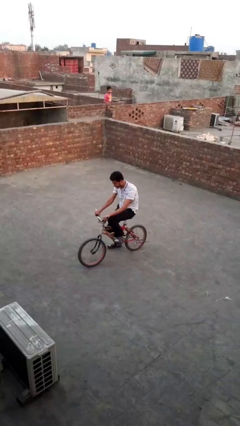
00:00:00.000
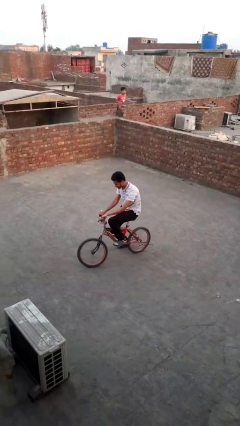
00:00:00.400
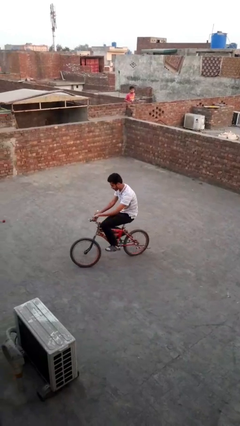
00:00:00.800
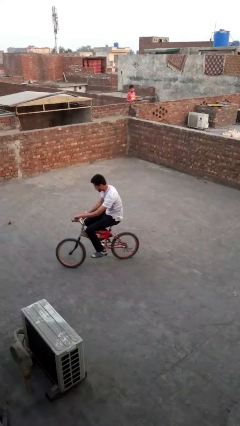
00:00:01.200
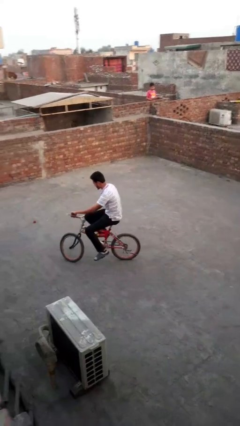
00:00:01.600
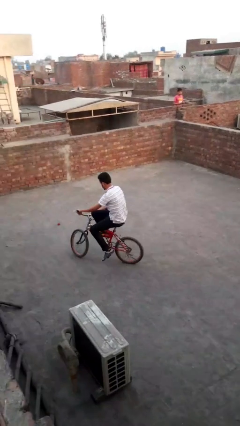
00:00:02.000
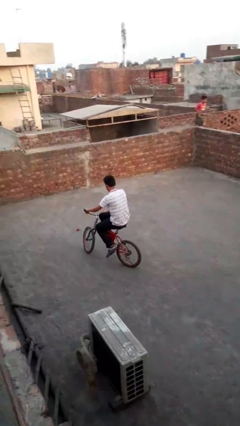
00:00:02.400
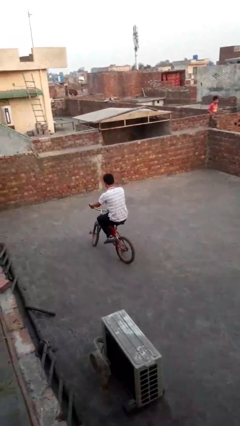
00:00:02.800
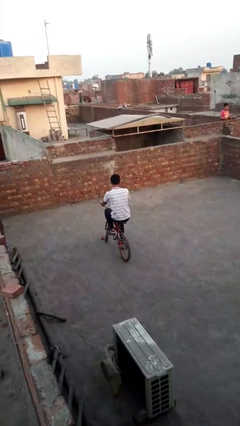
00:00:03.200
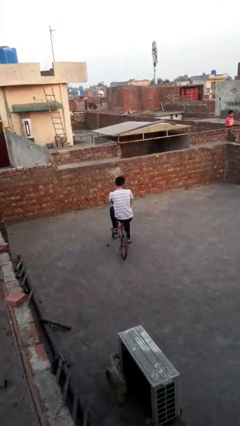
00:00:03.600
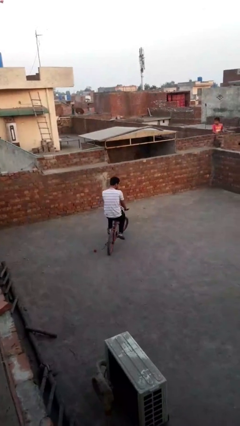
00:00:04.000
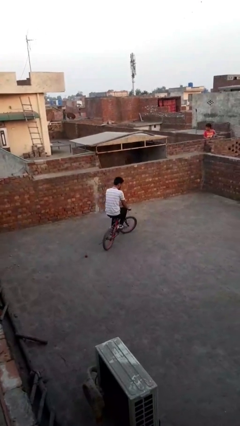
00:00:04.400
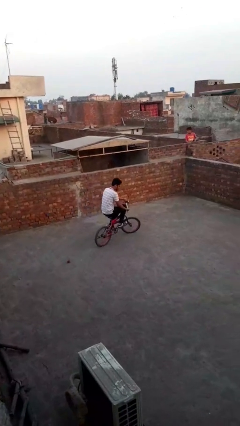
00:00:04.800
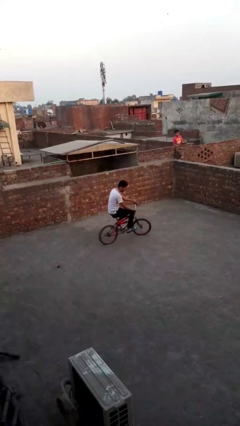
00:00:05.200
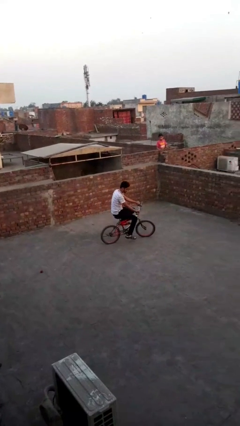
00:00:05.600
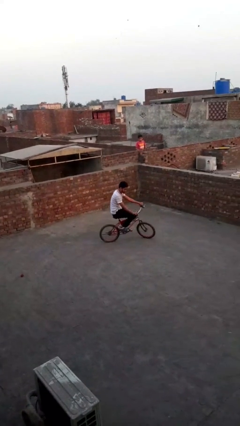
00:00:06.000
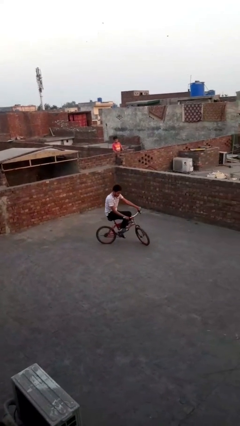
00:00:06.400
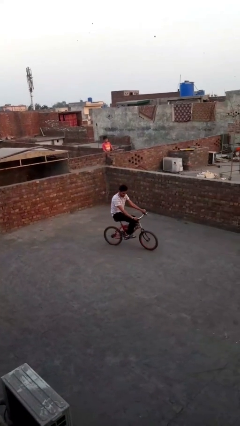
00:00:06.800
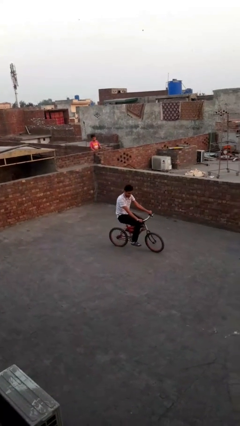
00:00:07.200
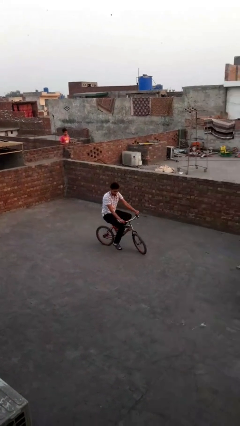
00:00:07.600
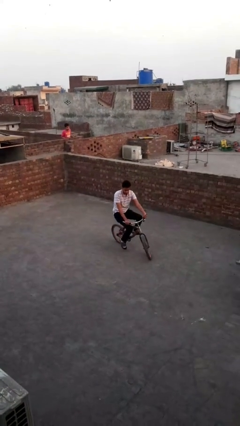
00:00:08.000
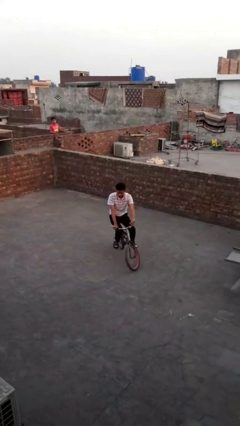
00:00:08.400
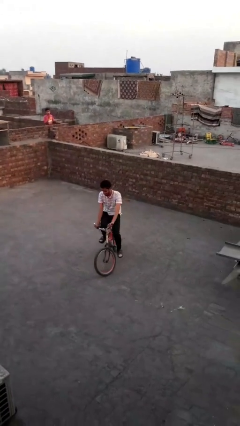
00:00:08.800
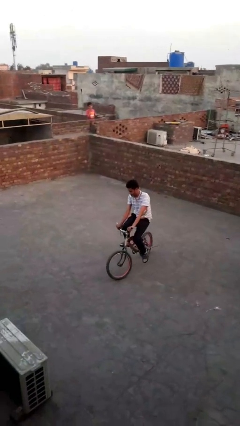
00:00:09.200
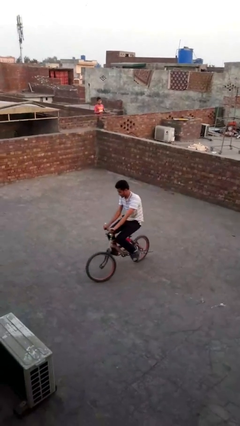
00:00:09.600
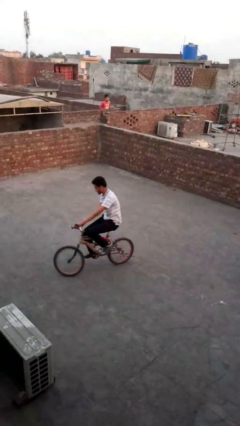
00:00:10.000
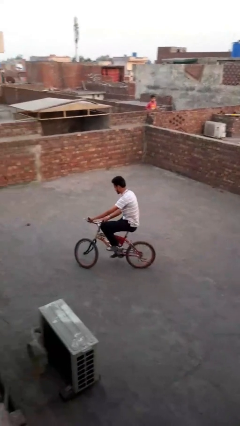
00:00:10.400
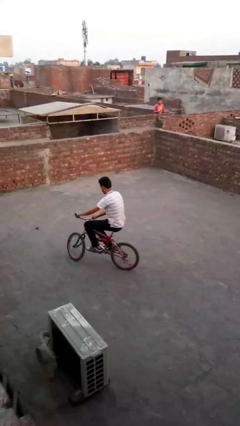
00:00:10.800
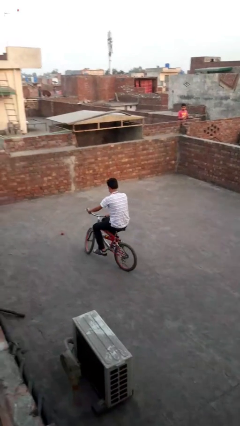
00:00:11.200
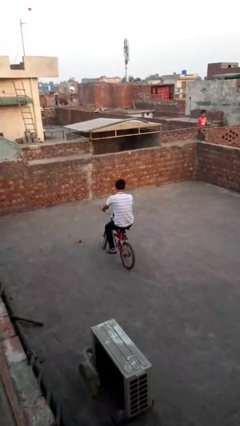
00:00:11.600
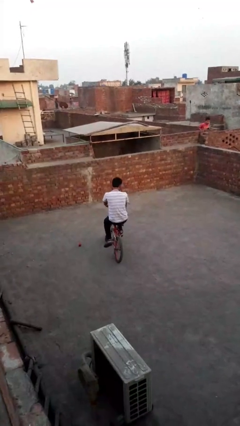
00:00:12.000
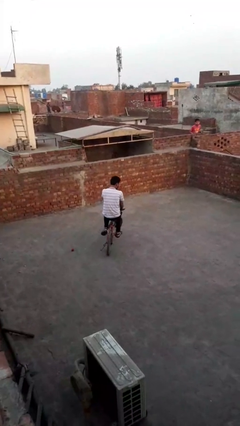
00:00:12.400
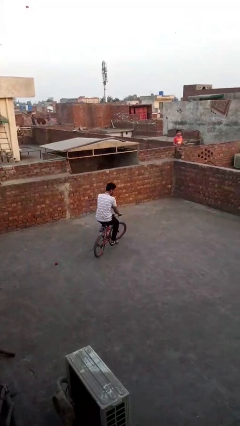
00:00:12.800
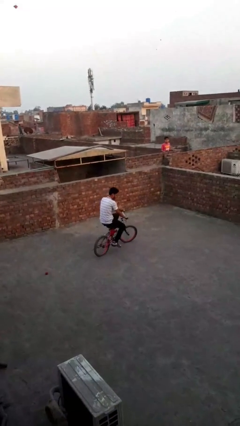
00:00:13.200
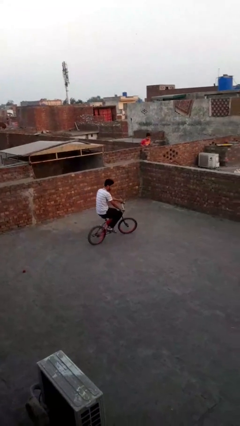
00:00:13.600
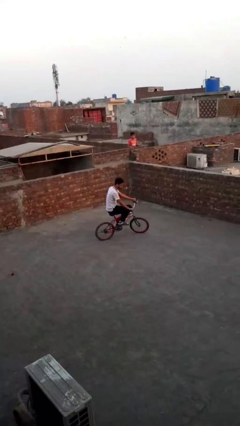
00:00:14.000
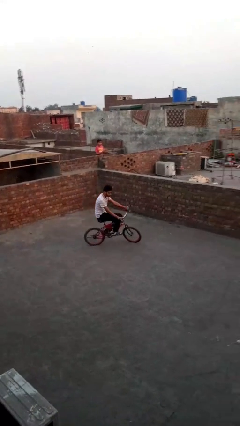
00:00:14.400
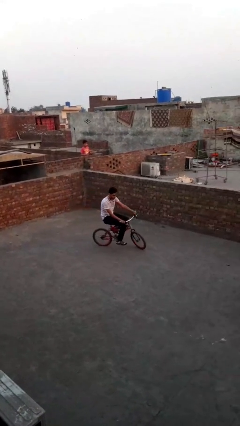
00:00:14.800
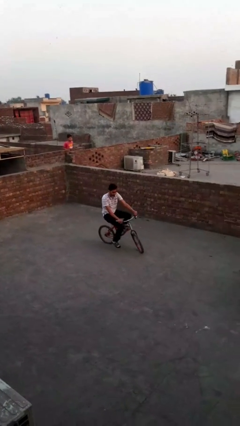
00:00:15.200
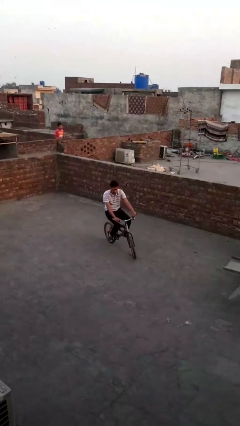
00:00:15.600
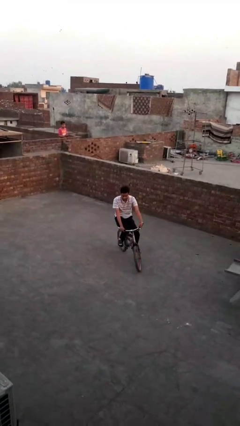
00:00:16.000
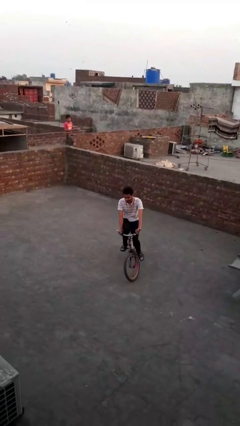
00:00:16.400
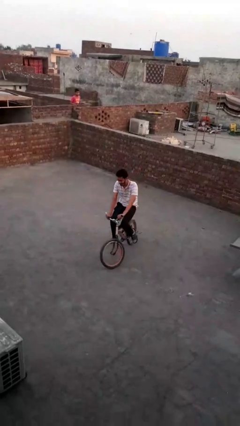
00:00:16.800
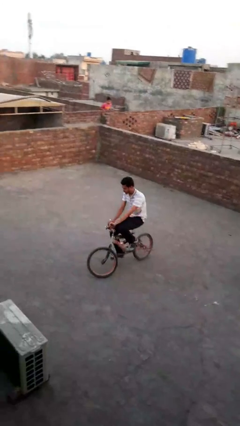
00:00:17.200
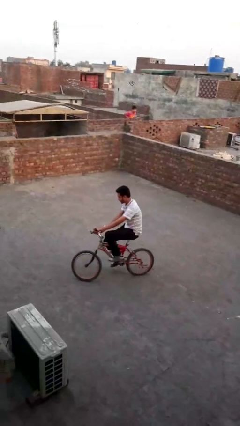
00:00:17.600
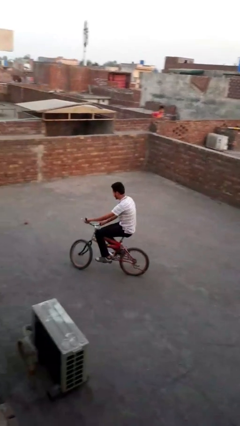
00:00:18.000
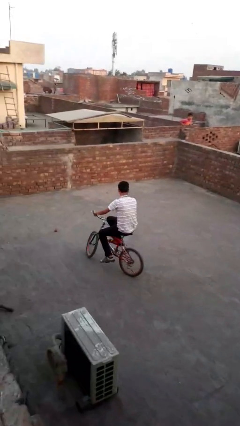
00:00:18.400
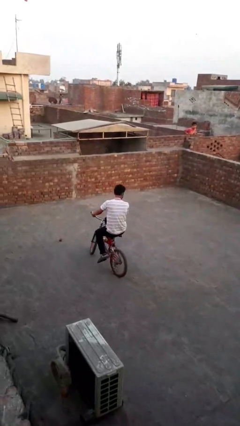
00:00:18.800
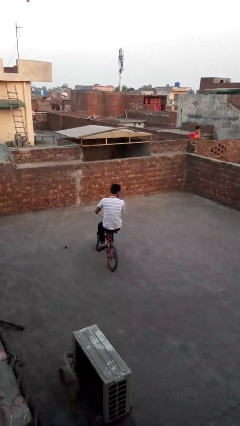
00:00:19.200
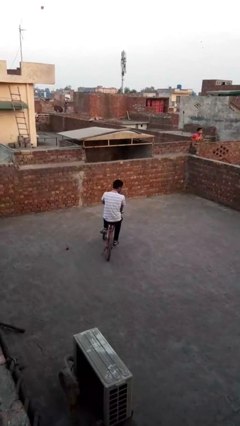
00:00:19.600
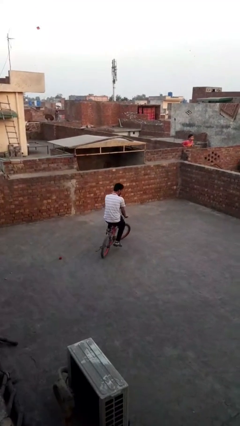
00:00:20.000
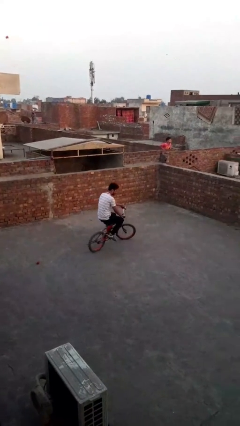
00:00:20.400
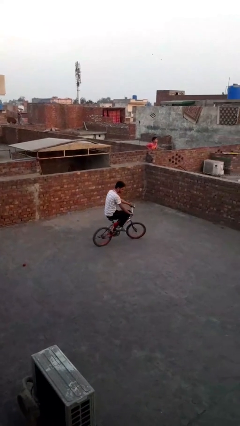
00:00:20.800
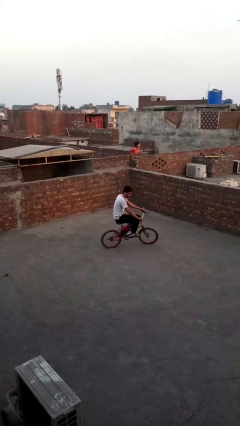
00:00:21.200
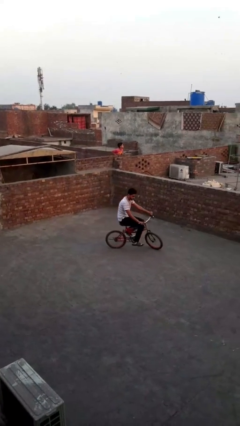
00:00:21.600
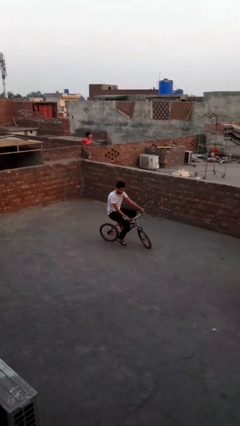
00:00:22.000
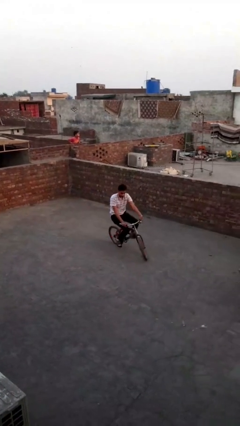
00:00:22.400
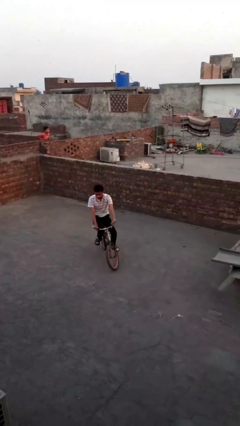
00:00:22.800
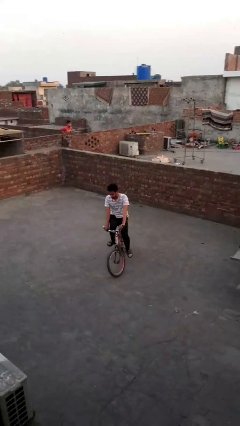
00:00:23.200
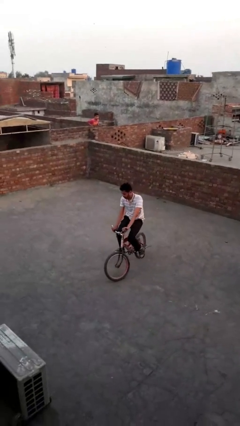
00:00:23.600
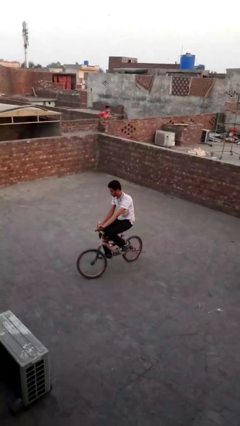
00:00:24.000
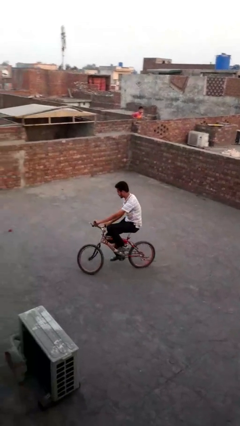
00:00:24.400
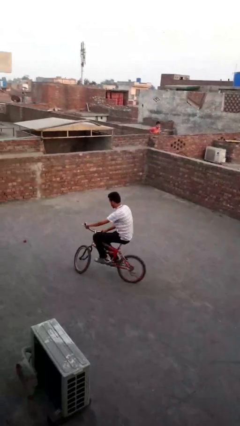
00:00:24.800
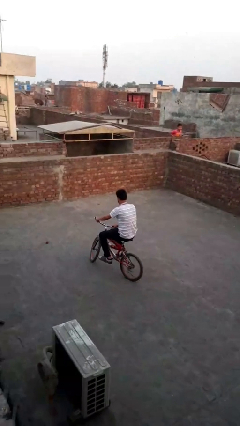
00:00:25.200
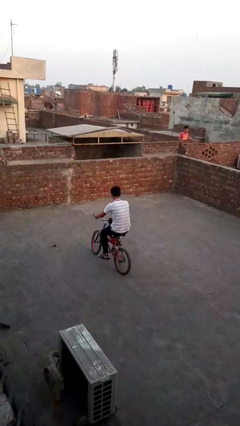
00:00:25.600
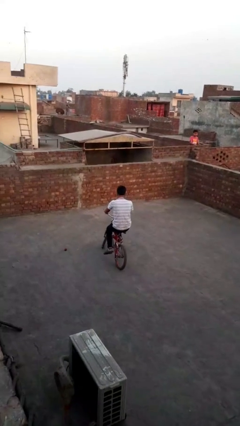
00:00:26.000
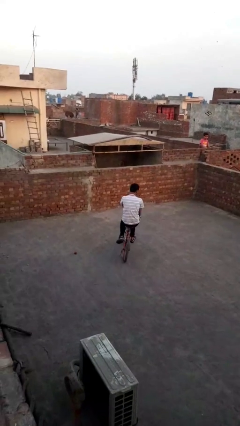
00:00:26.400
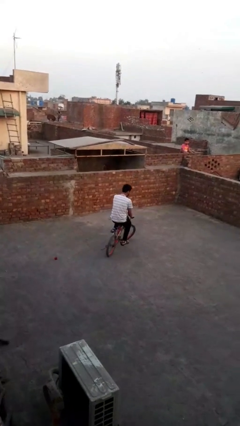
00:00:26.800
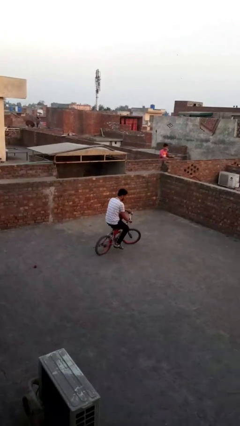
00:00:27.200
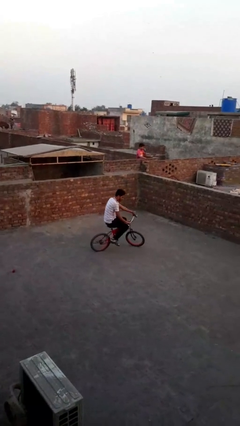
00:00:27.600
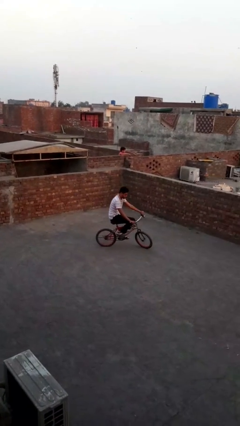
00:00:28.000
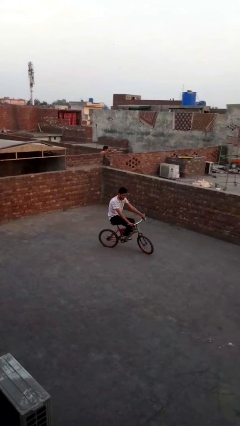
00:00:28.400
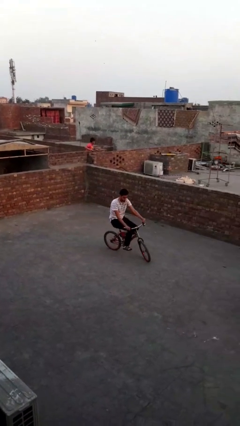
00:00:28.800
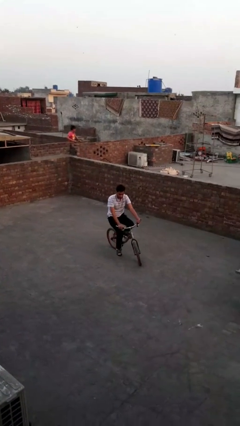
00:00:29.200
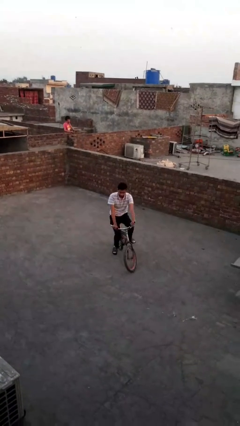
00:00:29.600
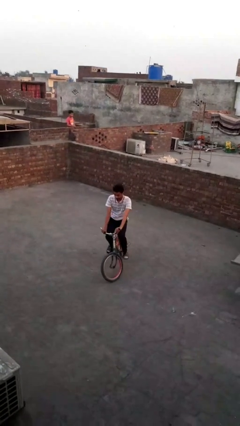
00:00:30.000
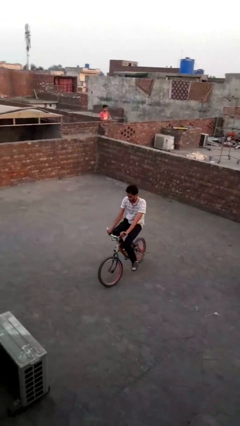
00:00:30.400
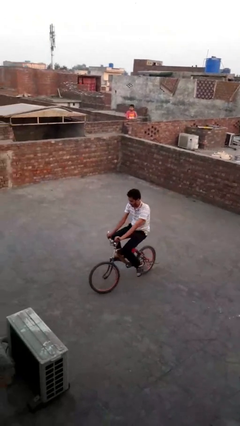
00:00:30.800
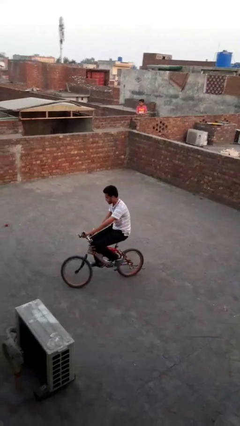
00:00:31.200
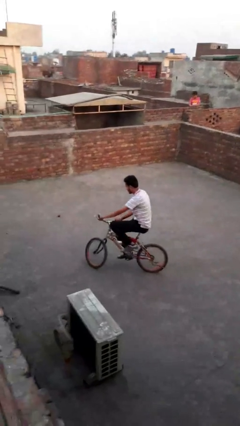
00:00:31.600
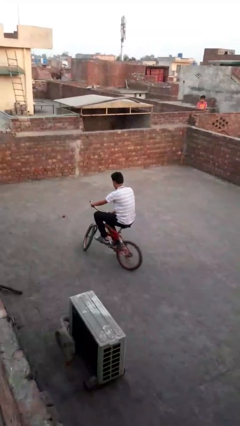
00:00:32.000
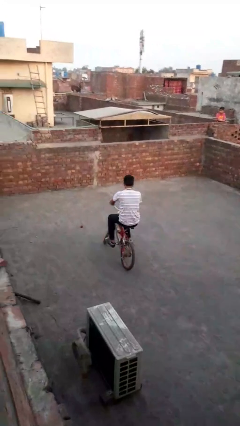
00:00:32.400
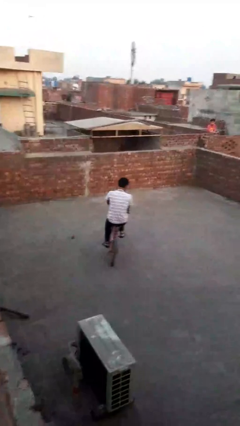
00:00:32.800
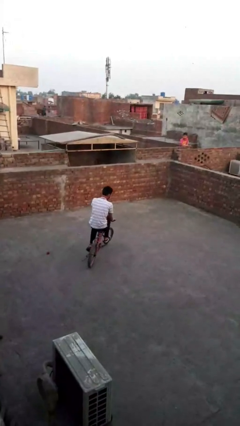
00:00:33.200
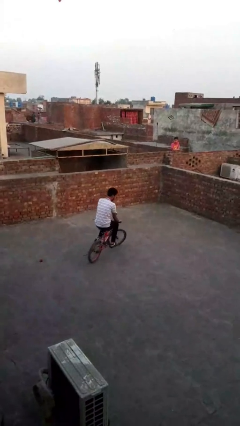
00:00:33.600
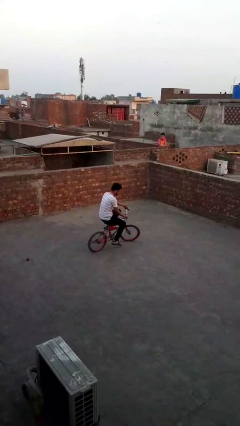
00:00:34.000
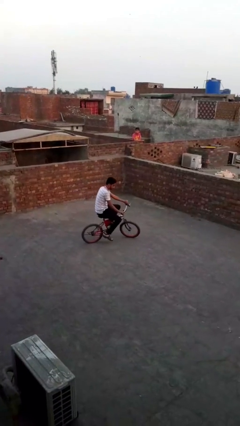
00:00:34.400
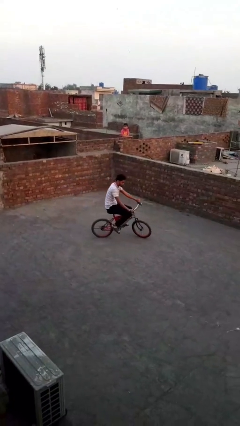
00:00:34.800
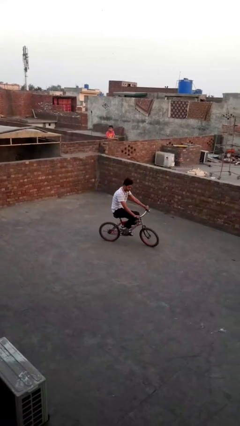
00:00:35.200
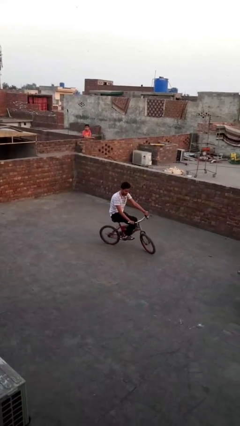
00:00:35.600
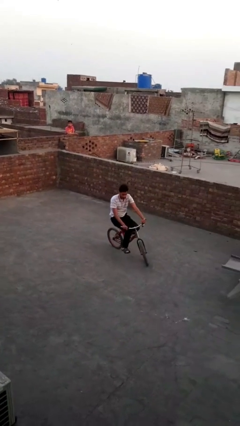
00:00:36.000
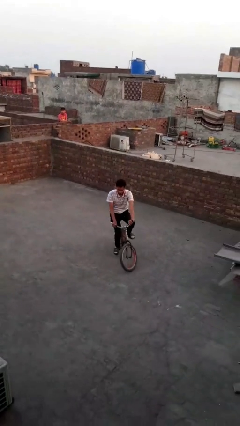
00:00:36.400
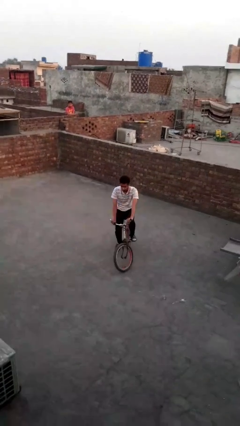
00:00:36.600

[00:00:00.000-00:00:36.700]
person rides bicycle

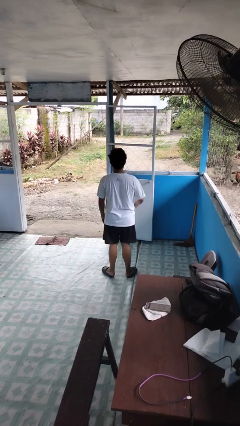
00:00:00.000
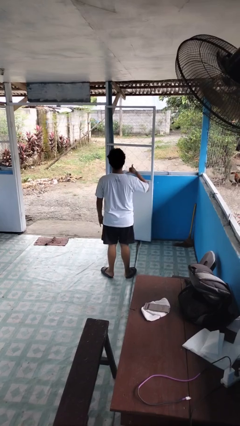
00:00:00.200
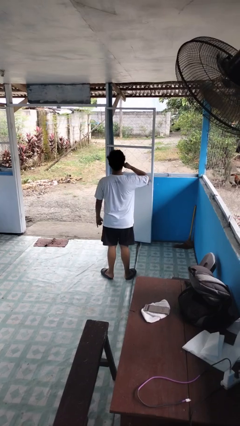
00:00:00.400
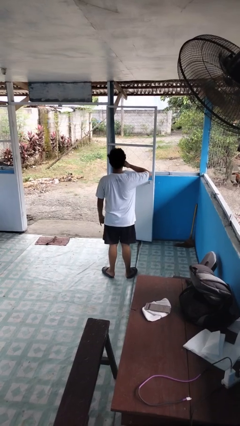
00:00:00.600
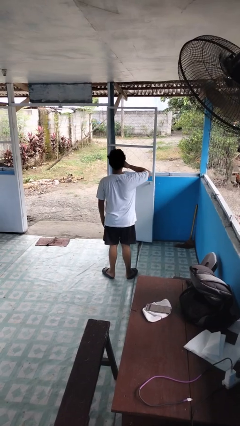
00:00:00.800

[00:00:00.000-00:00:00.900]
person gestures call me
